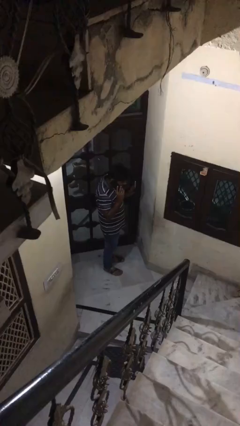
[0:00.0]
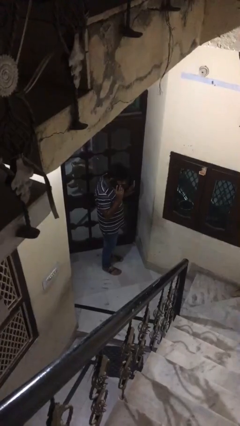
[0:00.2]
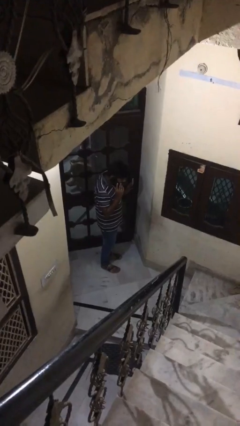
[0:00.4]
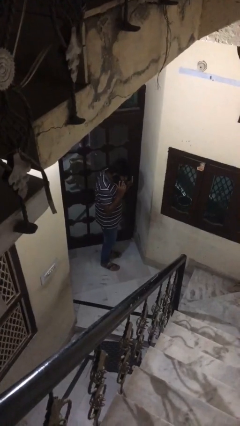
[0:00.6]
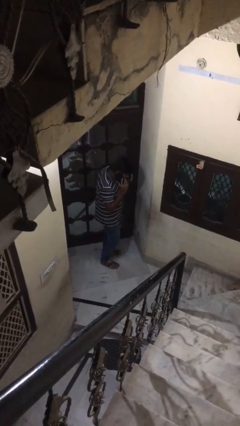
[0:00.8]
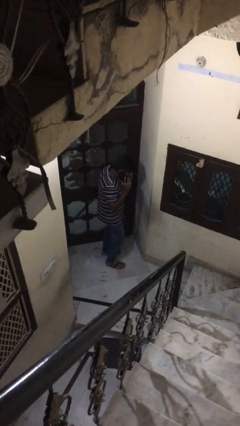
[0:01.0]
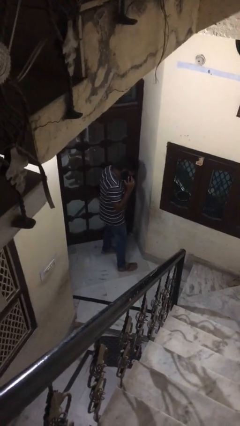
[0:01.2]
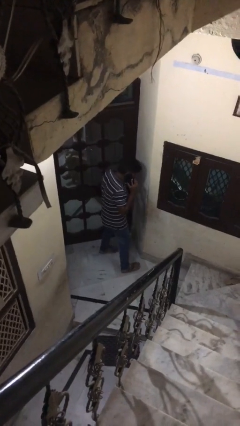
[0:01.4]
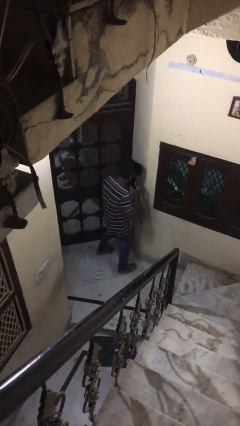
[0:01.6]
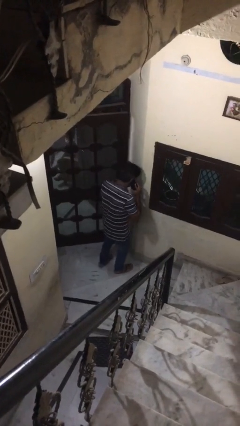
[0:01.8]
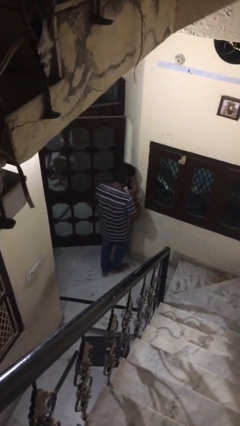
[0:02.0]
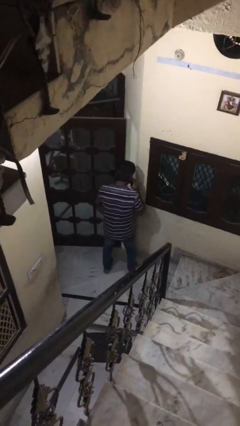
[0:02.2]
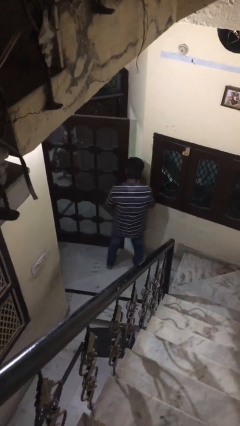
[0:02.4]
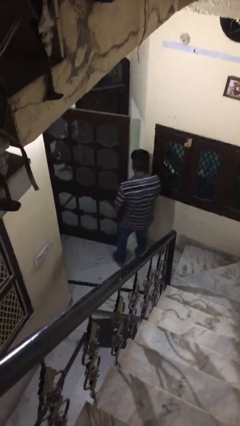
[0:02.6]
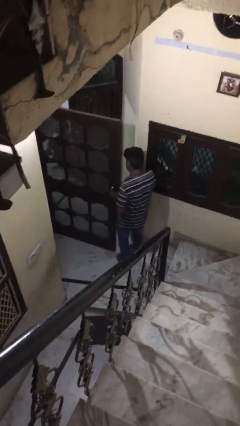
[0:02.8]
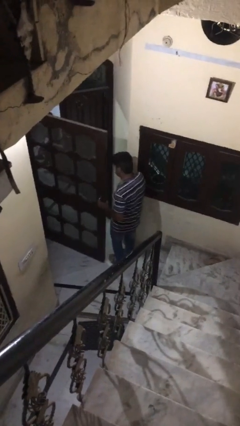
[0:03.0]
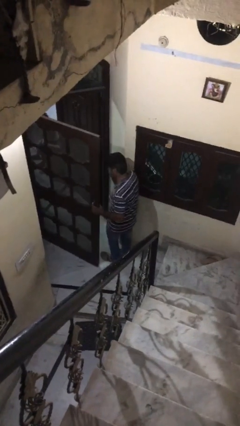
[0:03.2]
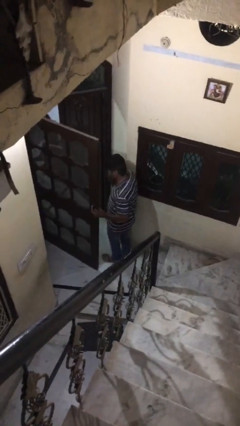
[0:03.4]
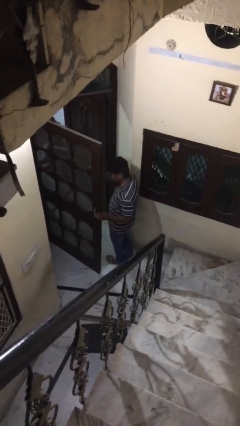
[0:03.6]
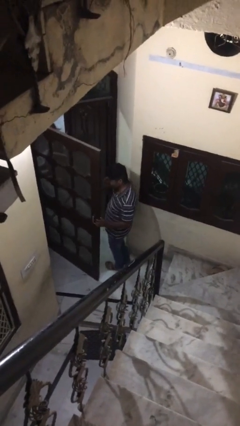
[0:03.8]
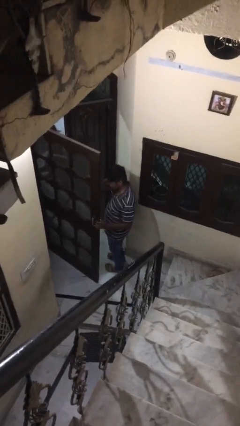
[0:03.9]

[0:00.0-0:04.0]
person opens facility door

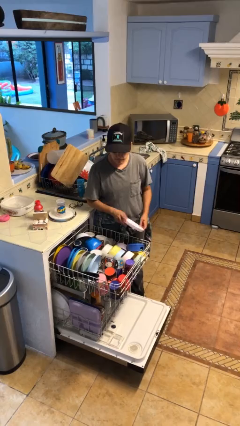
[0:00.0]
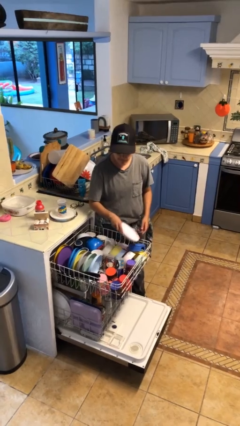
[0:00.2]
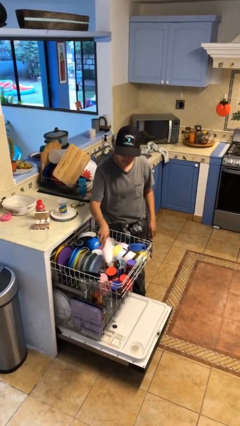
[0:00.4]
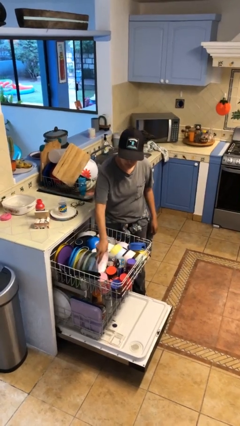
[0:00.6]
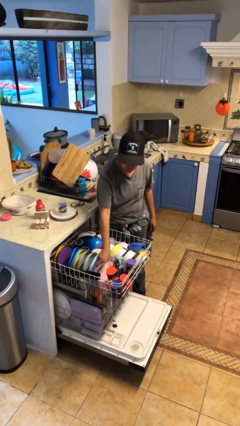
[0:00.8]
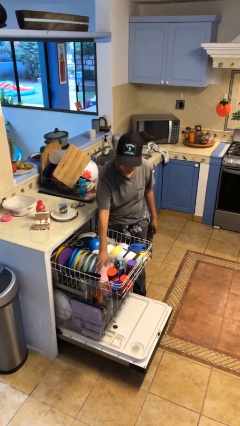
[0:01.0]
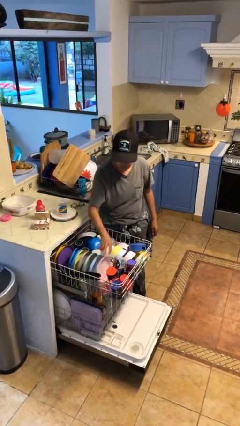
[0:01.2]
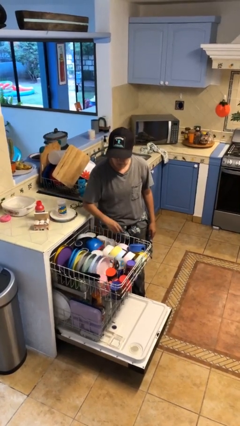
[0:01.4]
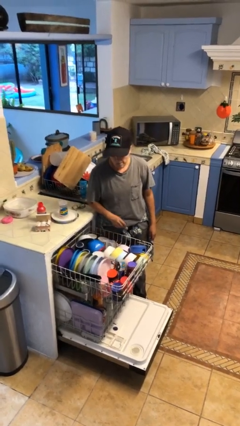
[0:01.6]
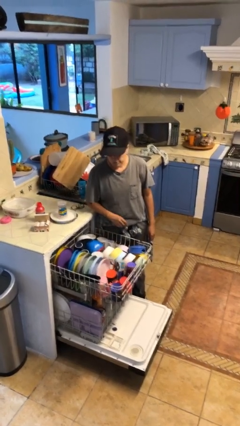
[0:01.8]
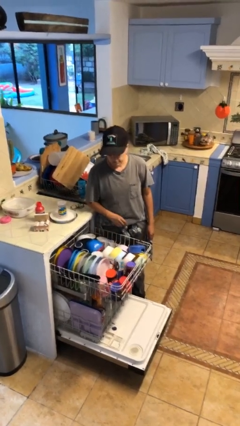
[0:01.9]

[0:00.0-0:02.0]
person loads dishwasher

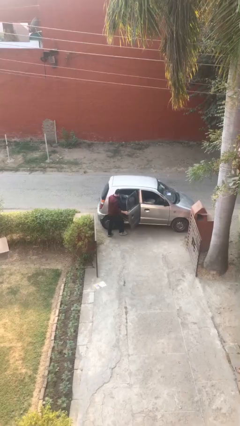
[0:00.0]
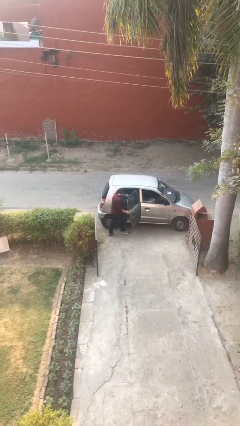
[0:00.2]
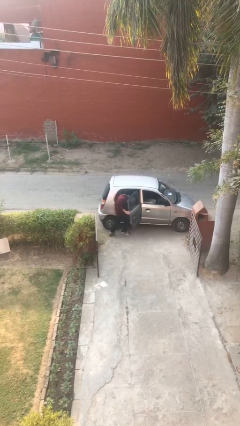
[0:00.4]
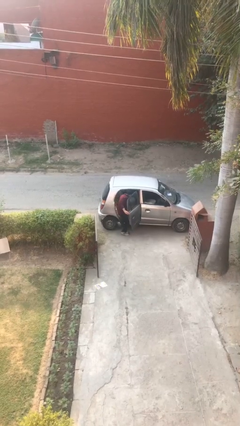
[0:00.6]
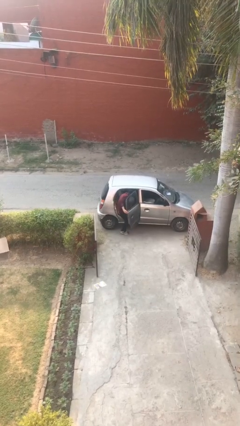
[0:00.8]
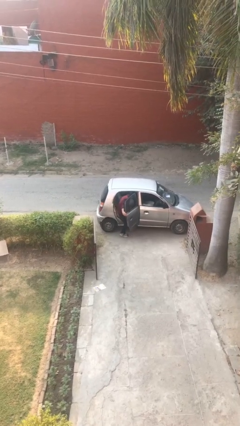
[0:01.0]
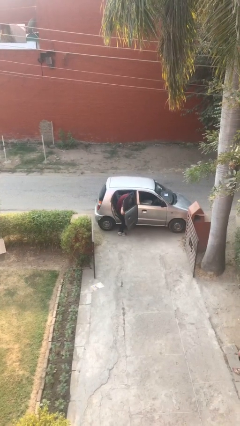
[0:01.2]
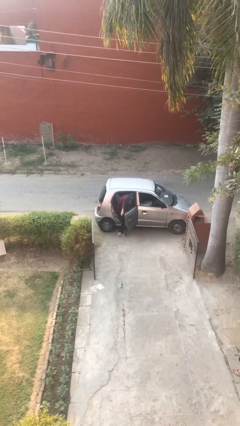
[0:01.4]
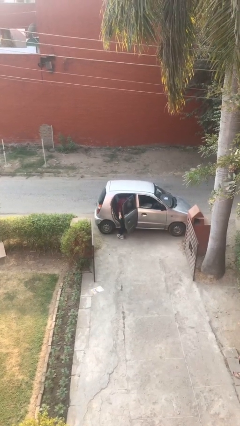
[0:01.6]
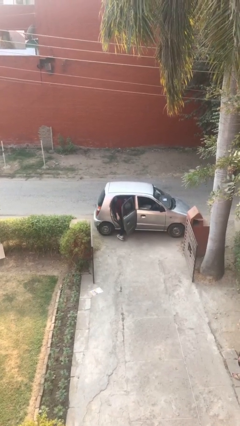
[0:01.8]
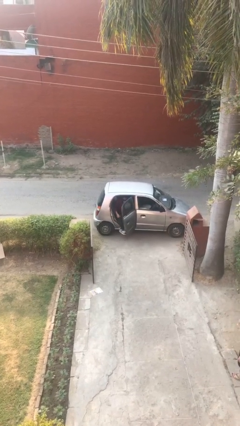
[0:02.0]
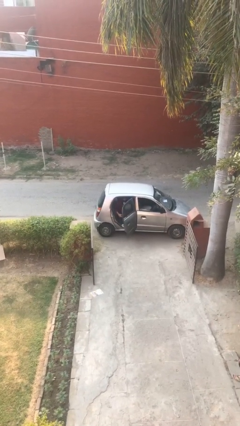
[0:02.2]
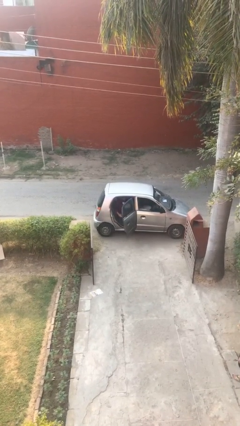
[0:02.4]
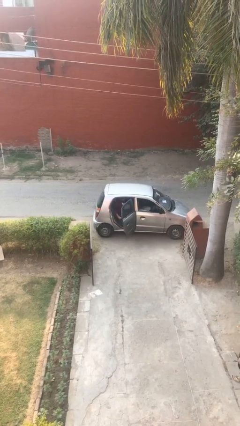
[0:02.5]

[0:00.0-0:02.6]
person enters car

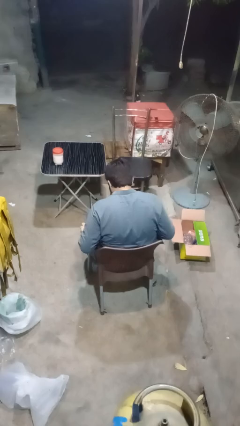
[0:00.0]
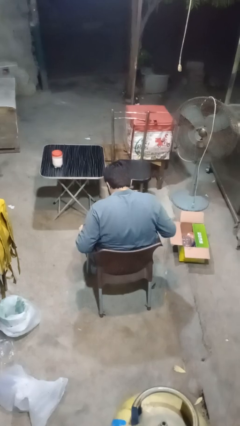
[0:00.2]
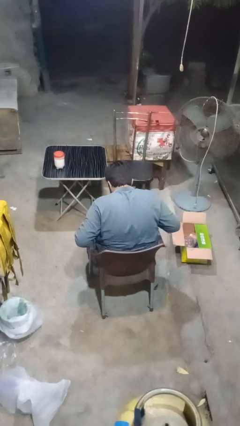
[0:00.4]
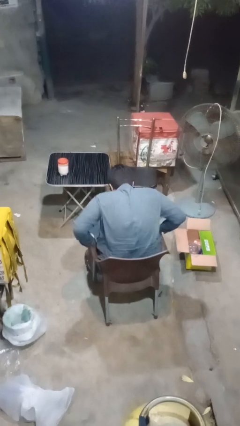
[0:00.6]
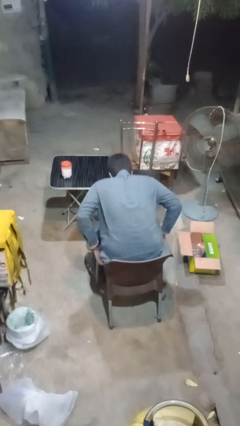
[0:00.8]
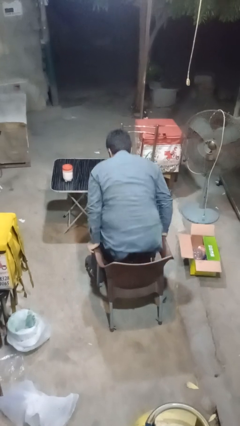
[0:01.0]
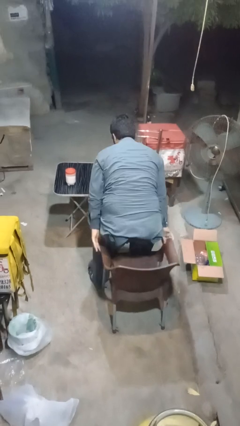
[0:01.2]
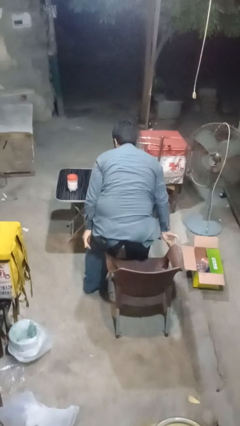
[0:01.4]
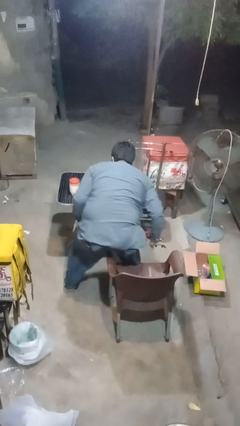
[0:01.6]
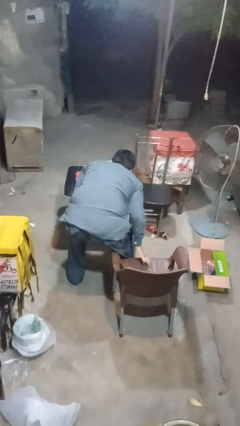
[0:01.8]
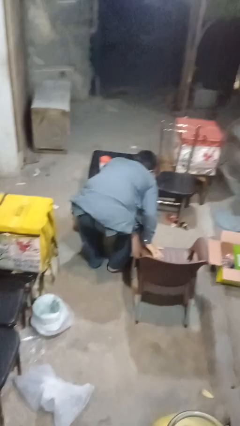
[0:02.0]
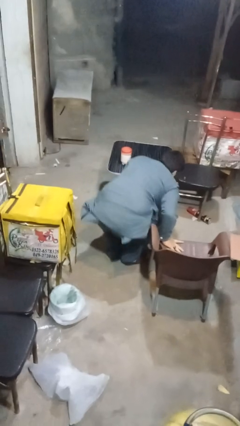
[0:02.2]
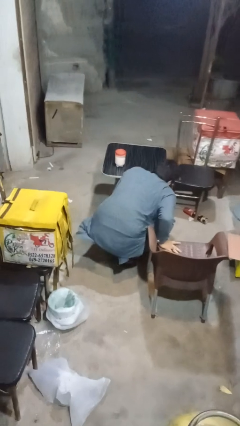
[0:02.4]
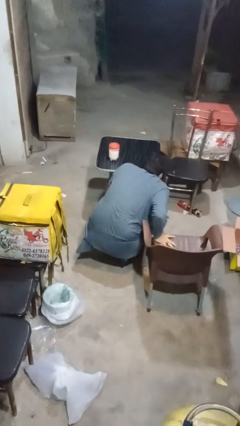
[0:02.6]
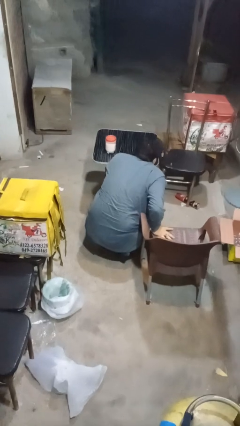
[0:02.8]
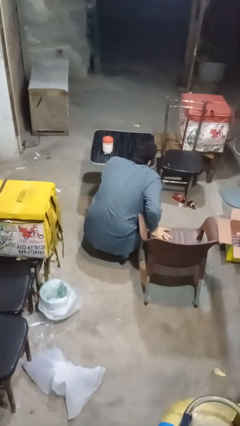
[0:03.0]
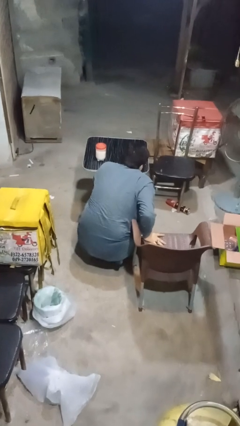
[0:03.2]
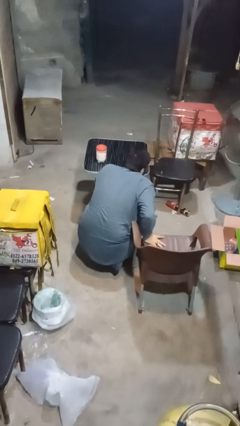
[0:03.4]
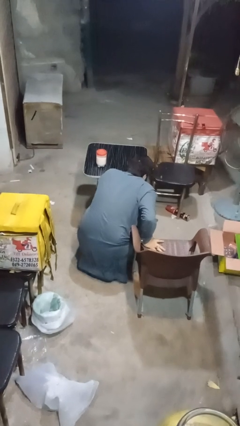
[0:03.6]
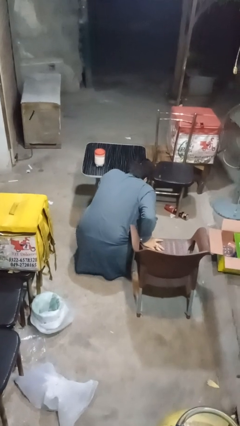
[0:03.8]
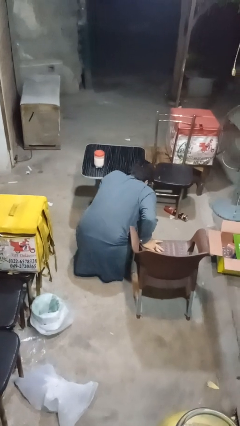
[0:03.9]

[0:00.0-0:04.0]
person falls from chair

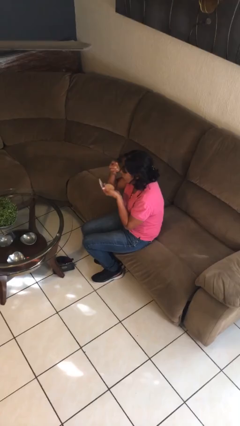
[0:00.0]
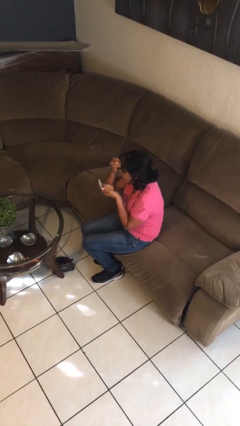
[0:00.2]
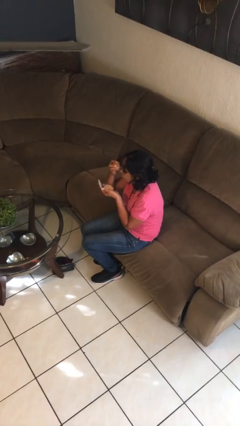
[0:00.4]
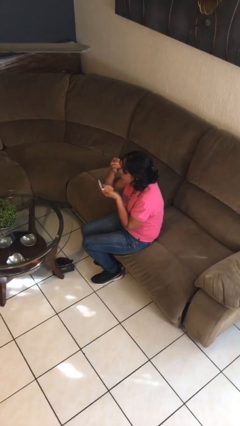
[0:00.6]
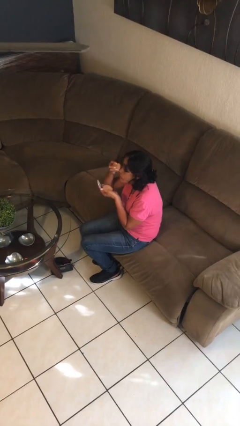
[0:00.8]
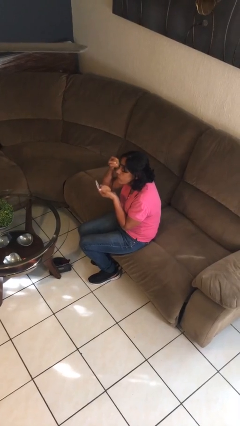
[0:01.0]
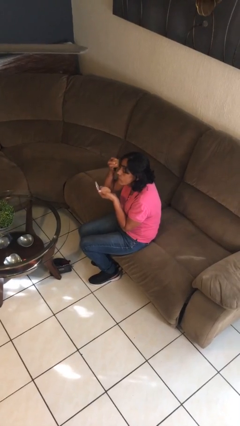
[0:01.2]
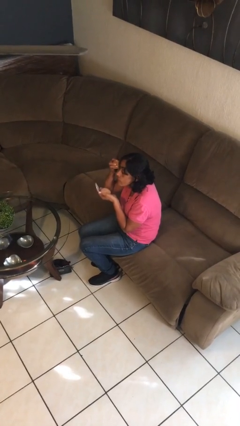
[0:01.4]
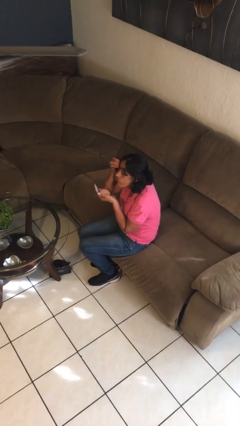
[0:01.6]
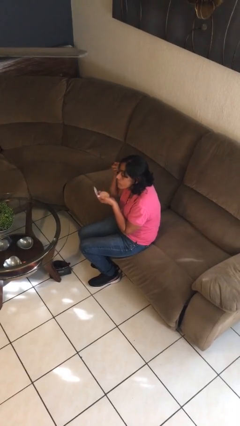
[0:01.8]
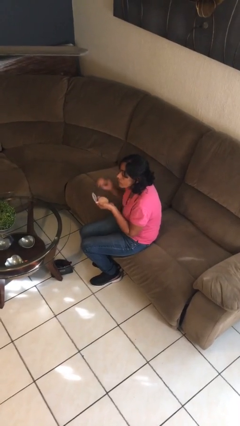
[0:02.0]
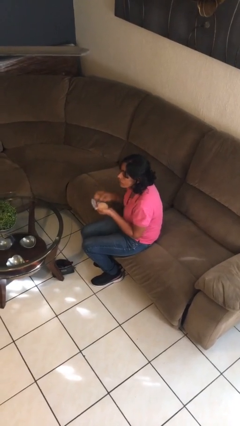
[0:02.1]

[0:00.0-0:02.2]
person applies foundation makeup

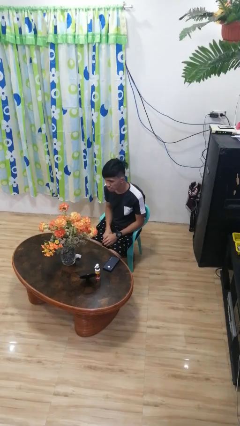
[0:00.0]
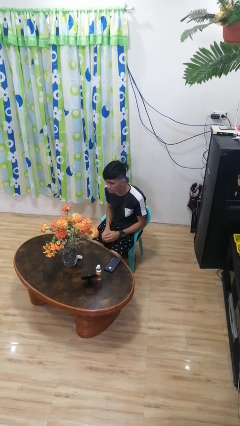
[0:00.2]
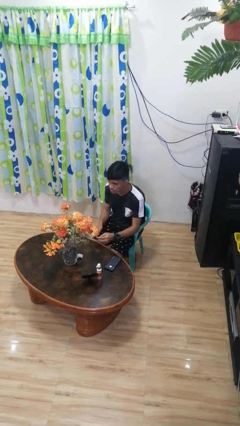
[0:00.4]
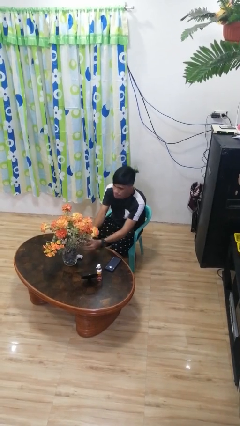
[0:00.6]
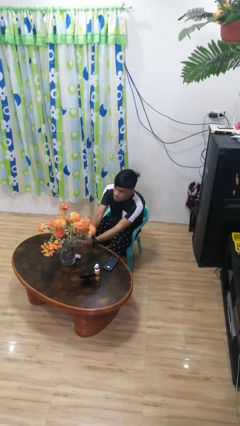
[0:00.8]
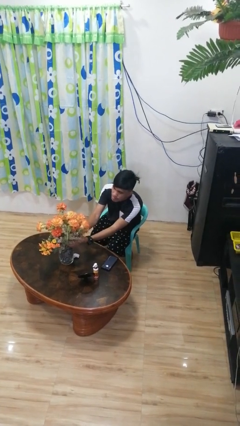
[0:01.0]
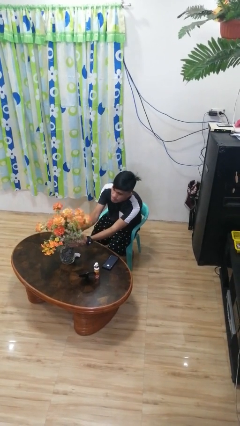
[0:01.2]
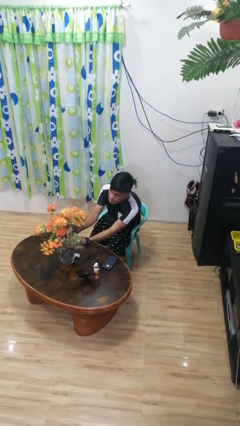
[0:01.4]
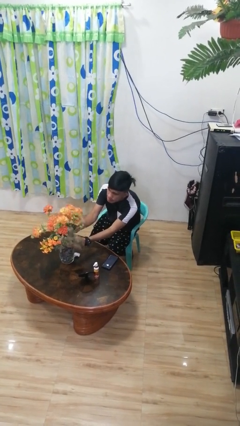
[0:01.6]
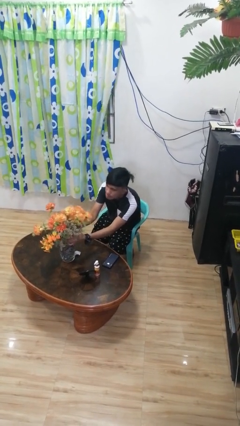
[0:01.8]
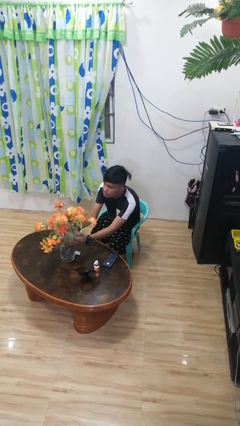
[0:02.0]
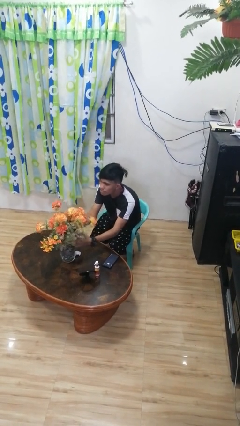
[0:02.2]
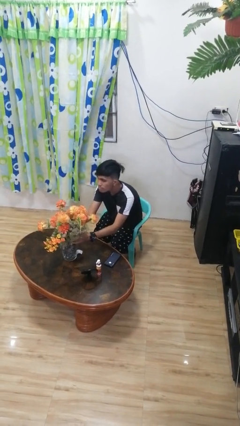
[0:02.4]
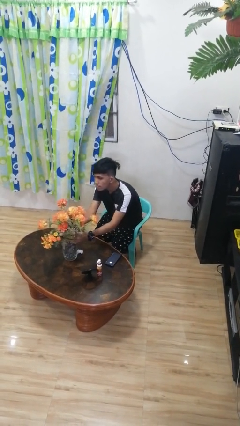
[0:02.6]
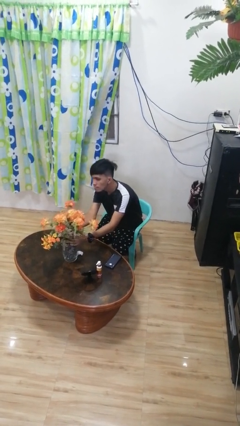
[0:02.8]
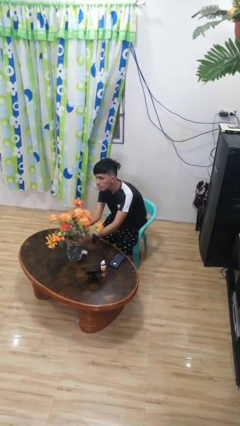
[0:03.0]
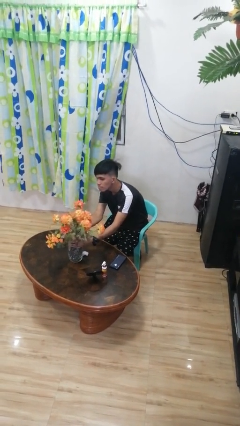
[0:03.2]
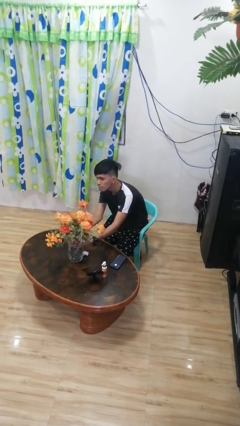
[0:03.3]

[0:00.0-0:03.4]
person arranges flowers in vase
